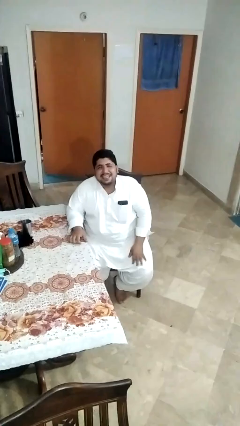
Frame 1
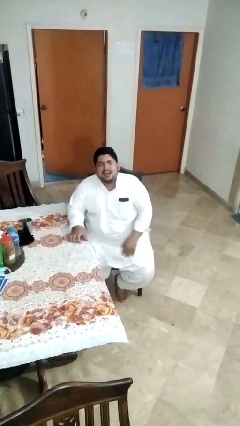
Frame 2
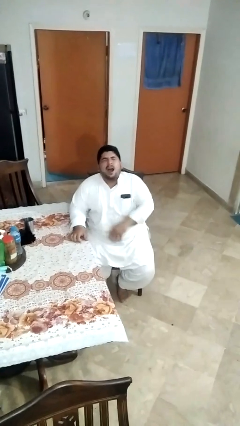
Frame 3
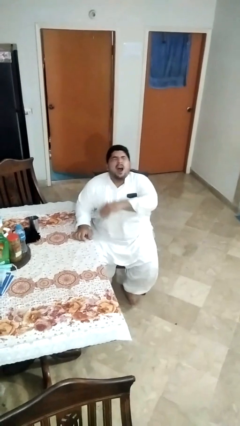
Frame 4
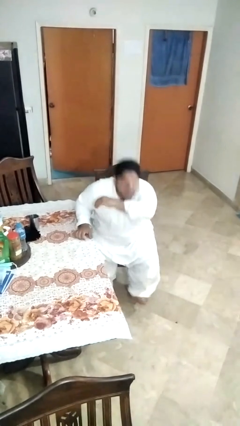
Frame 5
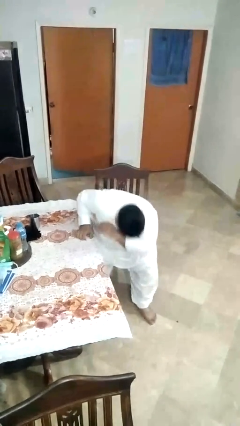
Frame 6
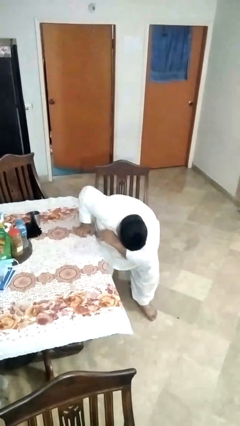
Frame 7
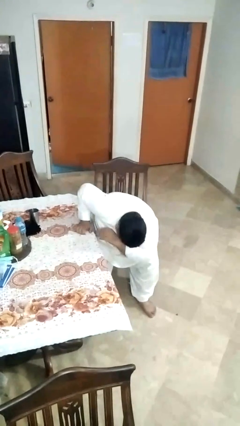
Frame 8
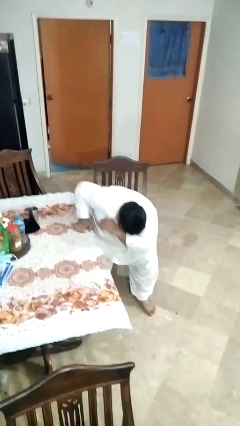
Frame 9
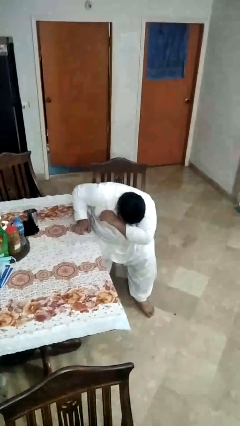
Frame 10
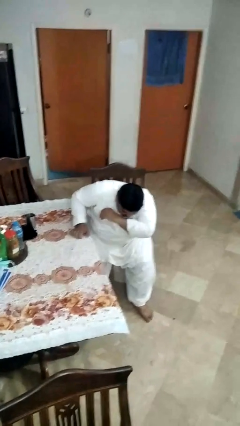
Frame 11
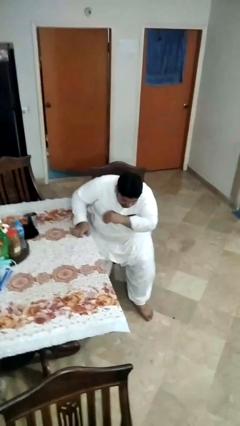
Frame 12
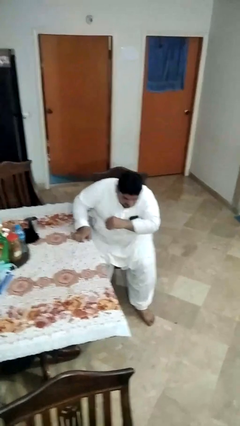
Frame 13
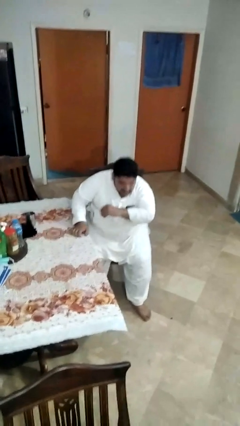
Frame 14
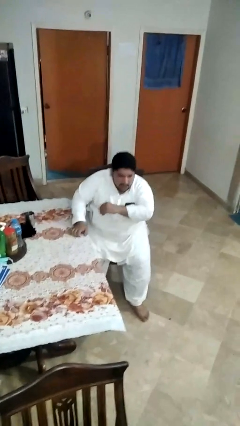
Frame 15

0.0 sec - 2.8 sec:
person sneezes into arm

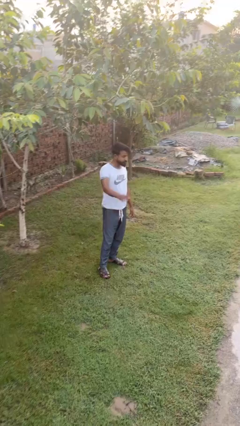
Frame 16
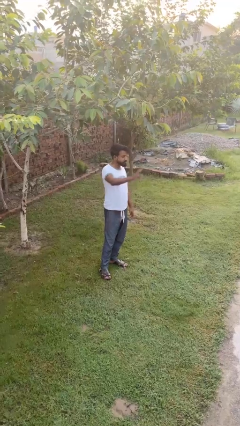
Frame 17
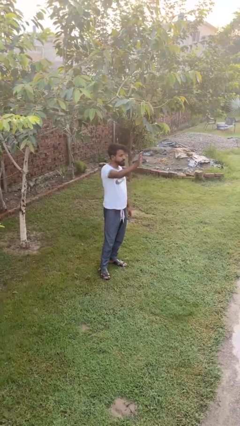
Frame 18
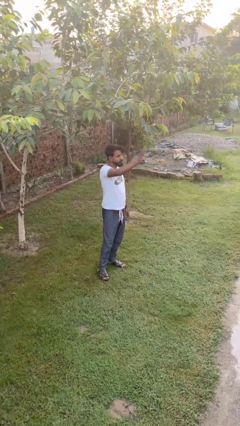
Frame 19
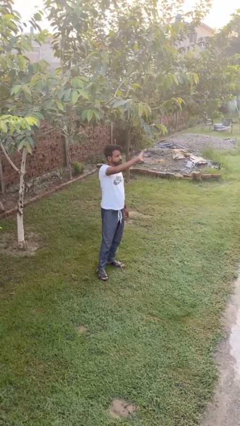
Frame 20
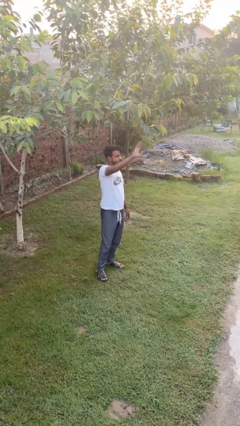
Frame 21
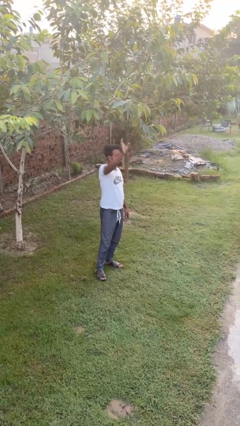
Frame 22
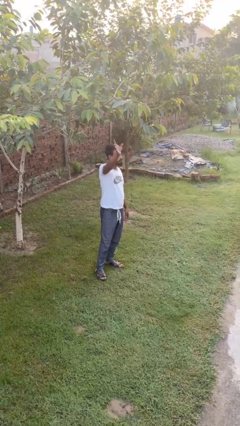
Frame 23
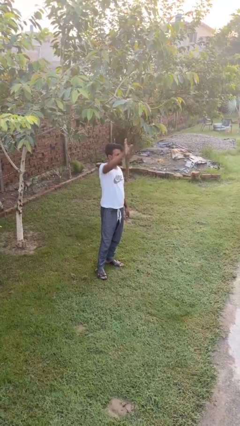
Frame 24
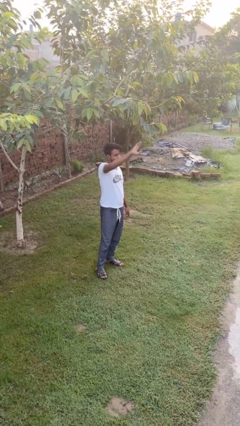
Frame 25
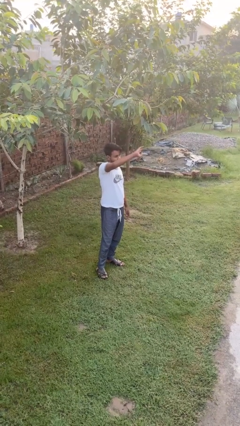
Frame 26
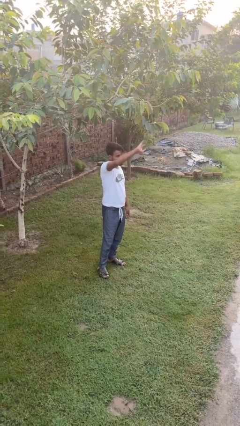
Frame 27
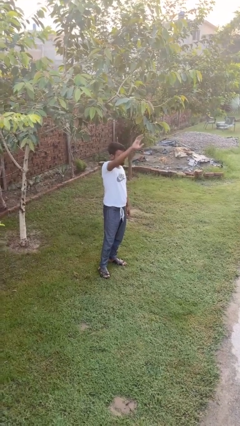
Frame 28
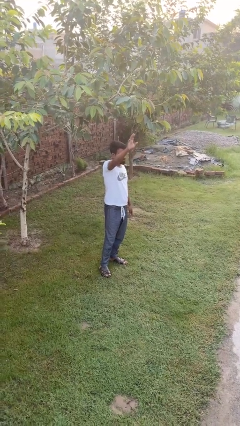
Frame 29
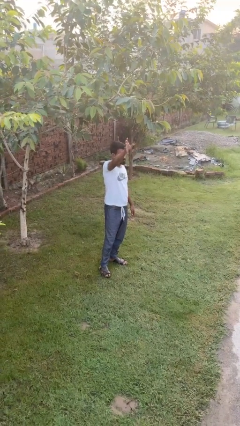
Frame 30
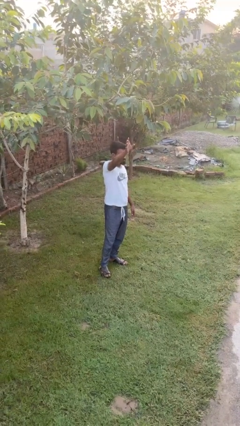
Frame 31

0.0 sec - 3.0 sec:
person waves at person

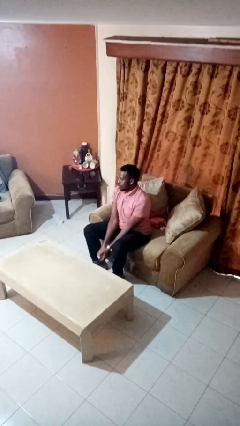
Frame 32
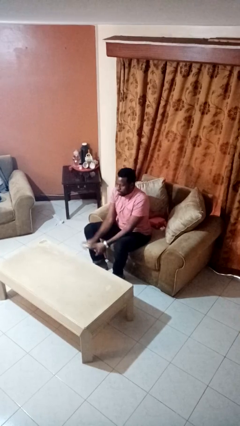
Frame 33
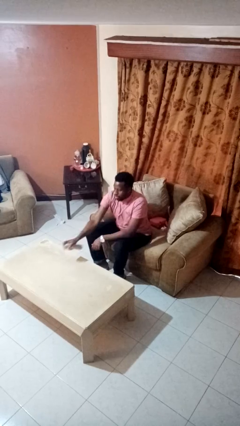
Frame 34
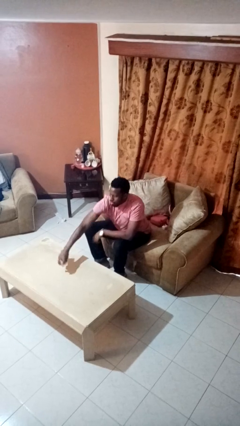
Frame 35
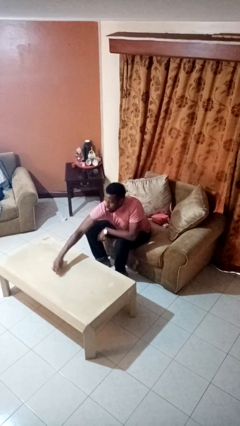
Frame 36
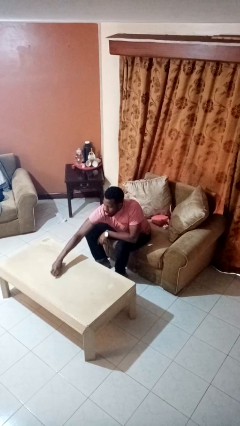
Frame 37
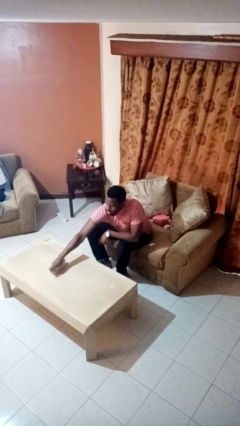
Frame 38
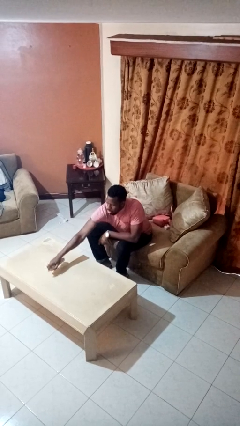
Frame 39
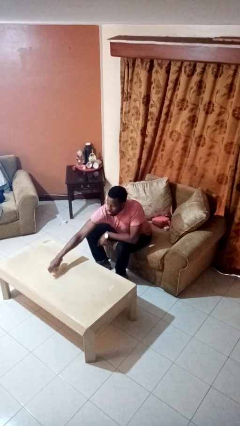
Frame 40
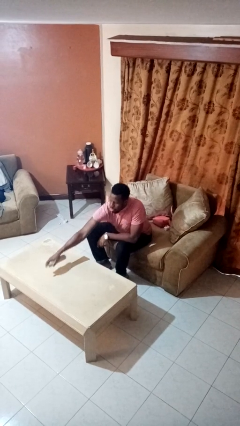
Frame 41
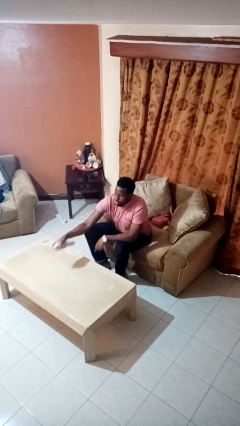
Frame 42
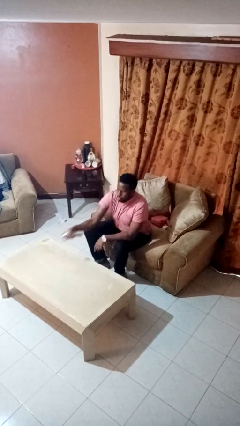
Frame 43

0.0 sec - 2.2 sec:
person sprays from bottle

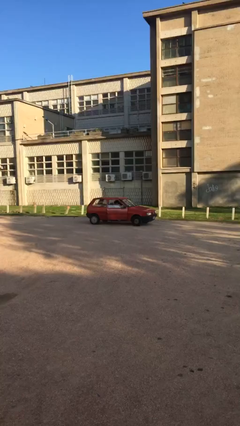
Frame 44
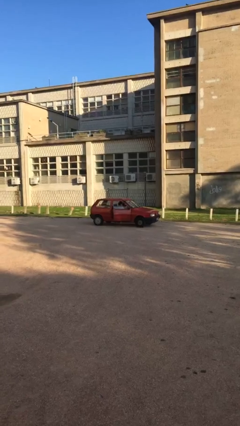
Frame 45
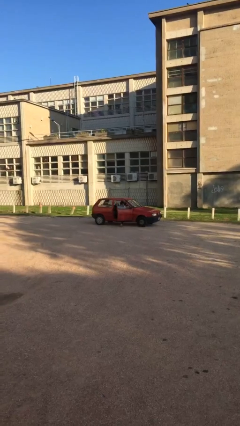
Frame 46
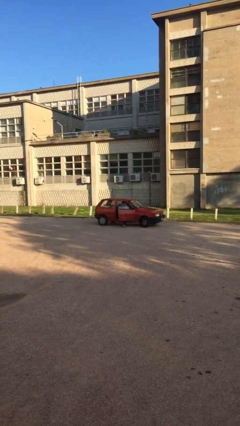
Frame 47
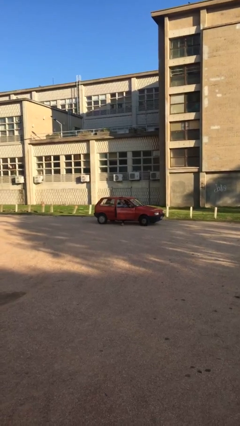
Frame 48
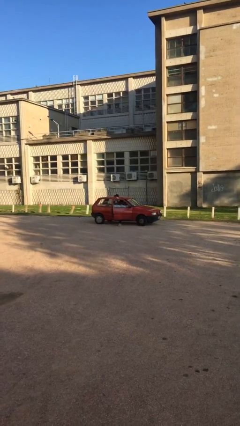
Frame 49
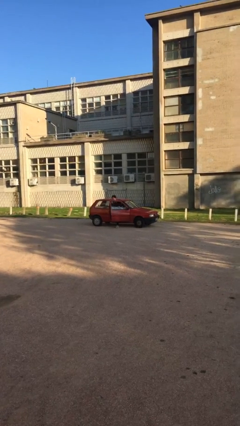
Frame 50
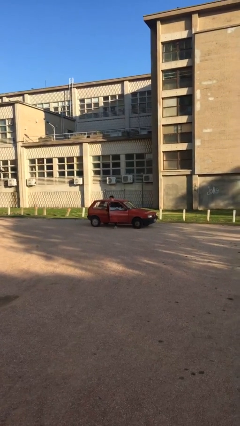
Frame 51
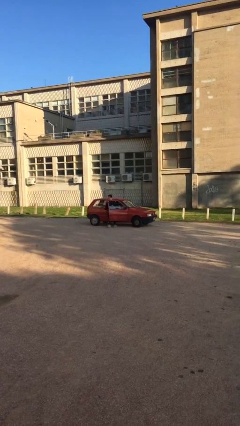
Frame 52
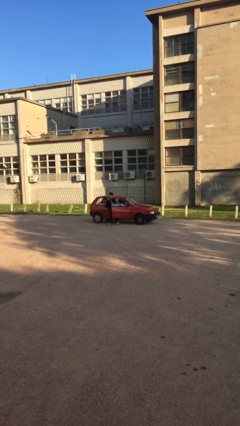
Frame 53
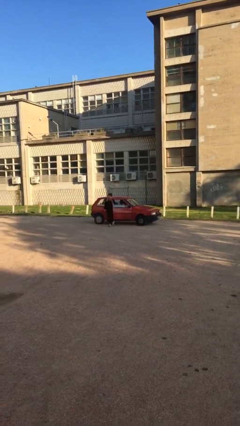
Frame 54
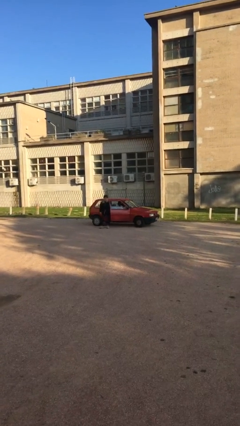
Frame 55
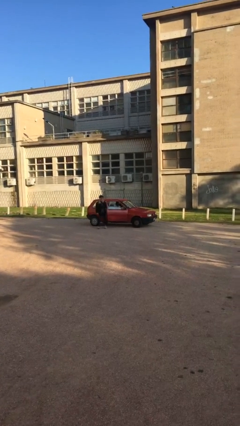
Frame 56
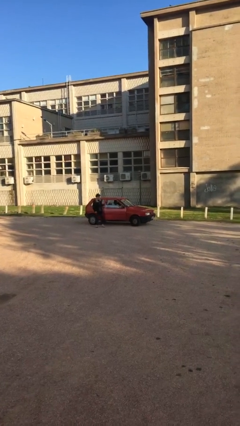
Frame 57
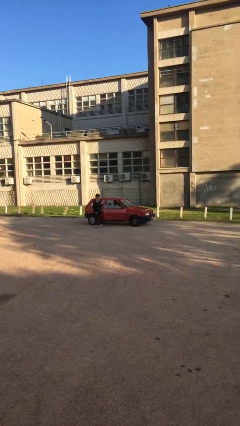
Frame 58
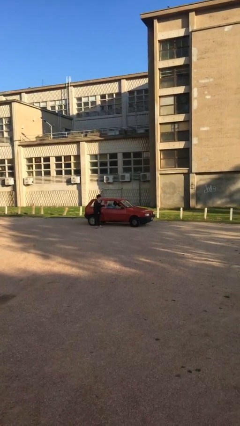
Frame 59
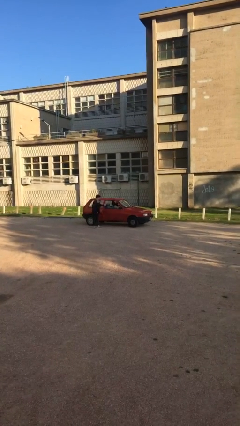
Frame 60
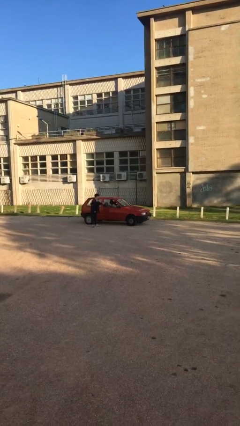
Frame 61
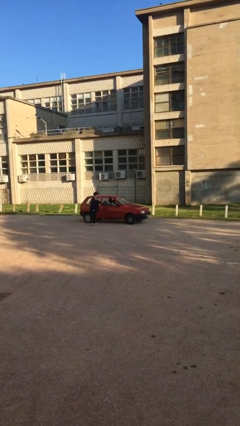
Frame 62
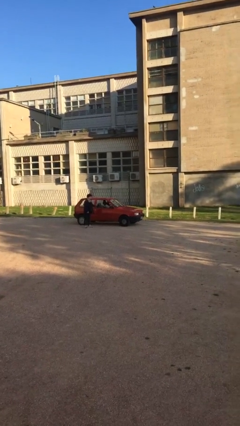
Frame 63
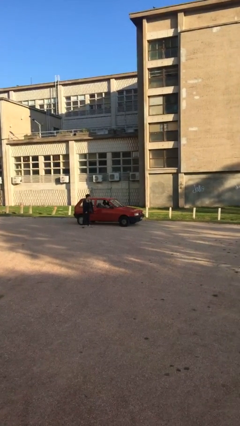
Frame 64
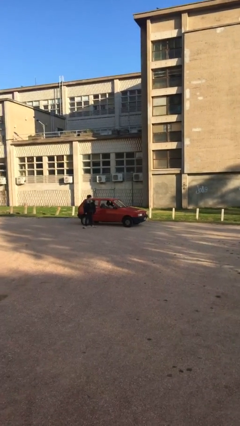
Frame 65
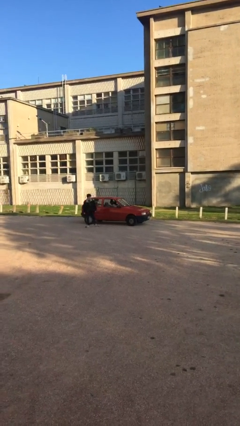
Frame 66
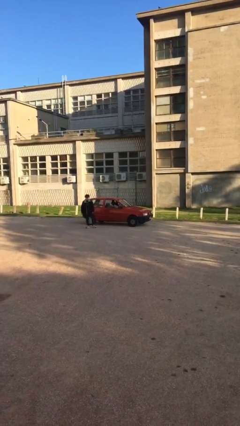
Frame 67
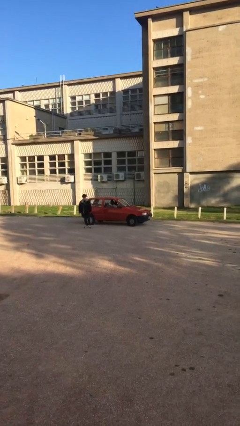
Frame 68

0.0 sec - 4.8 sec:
car drops off person

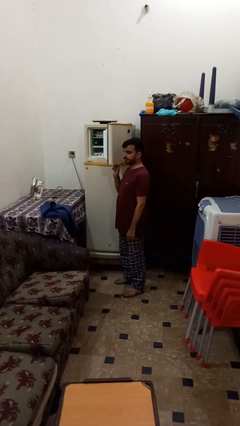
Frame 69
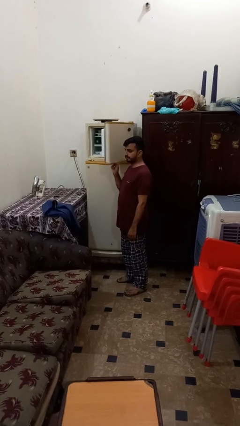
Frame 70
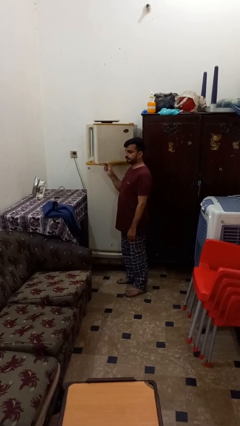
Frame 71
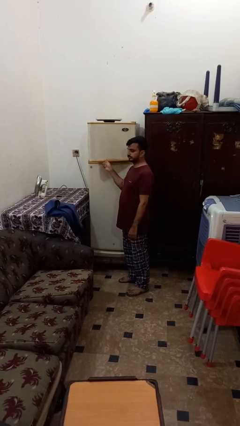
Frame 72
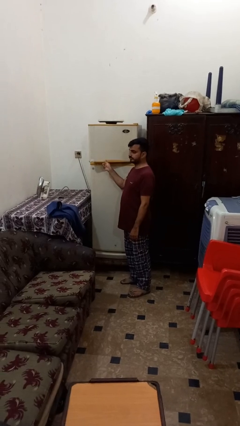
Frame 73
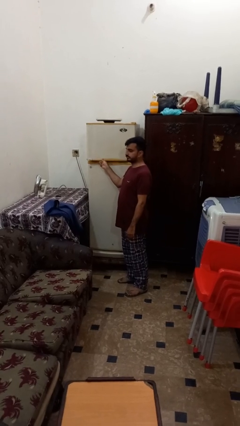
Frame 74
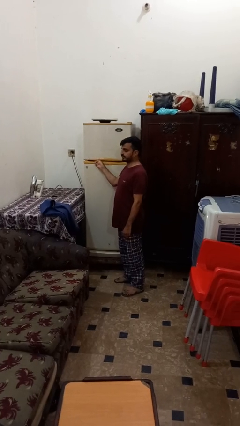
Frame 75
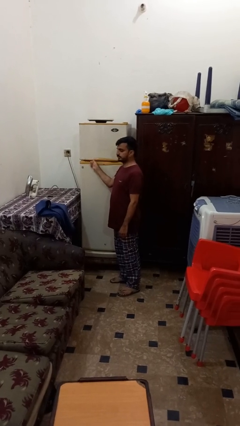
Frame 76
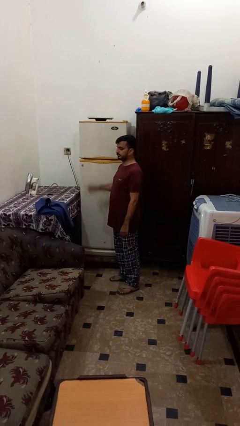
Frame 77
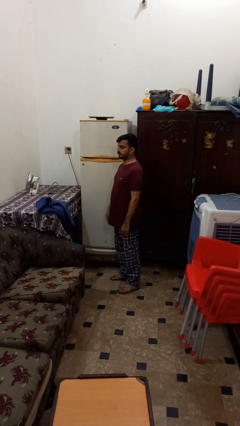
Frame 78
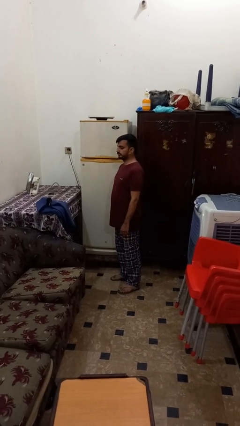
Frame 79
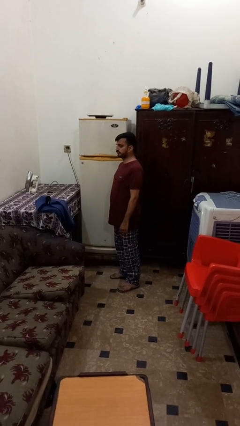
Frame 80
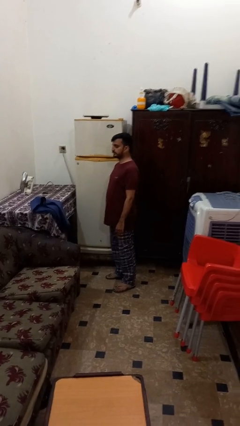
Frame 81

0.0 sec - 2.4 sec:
person closes refrigerator

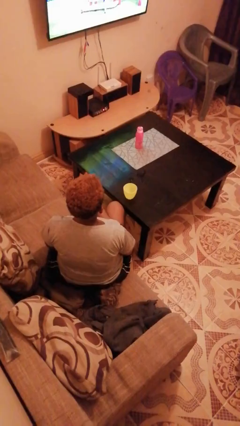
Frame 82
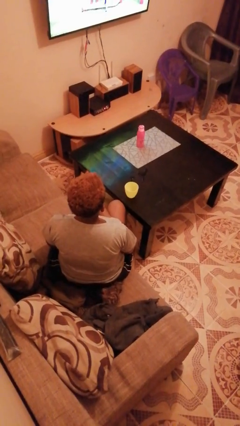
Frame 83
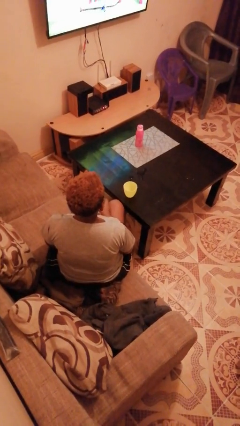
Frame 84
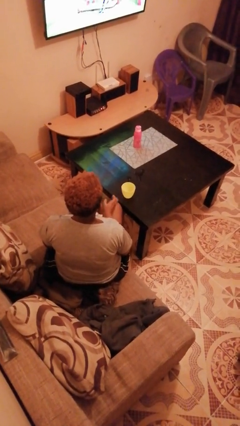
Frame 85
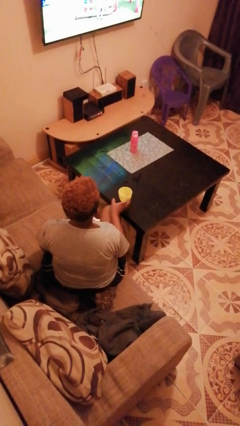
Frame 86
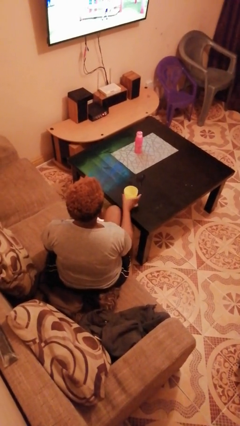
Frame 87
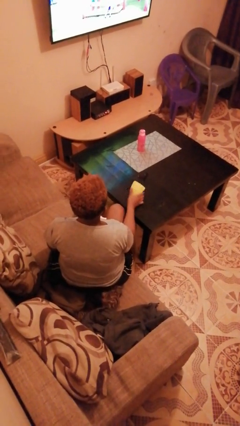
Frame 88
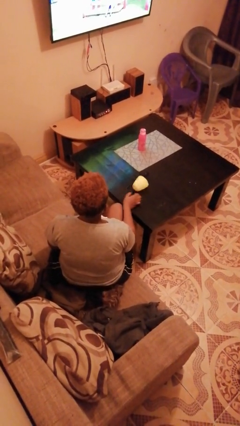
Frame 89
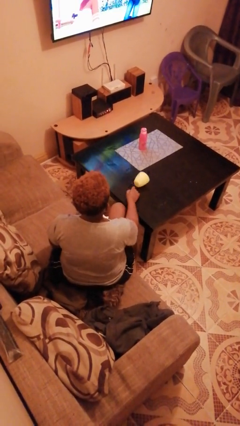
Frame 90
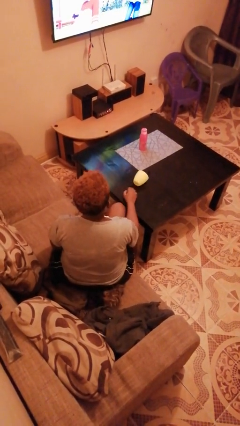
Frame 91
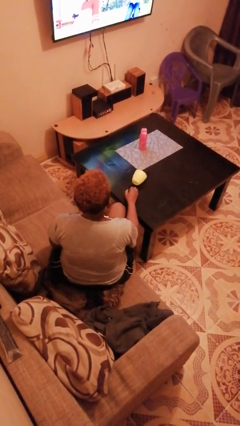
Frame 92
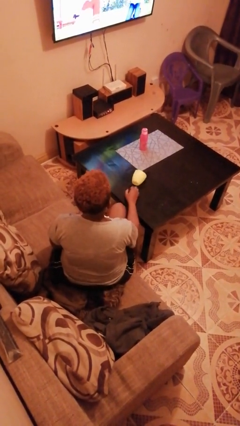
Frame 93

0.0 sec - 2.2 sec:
person spills on table
